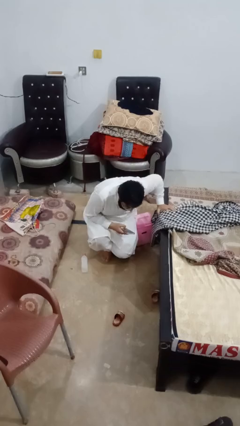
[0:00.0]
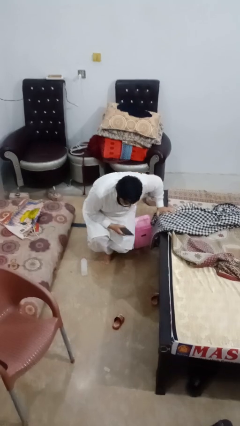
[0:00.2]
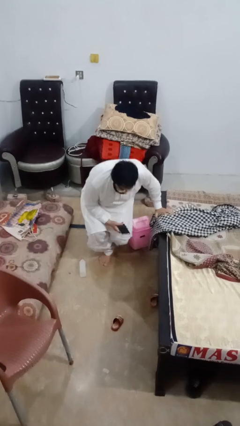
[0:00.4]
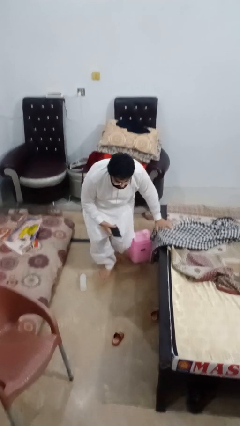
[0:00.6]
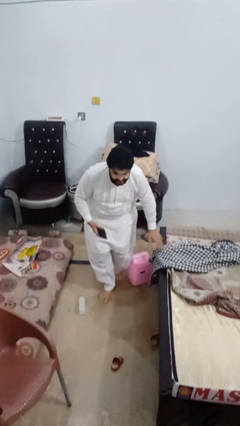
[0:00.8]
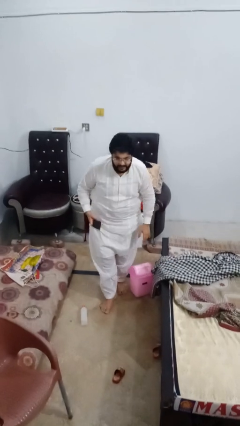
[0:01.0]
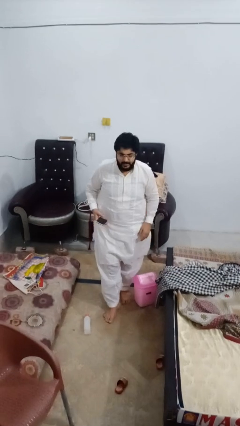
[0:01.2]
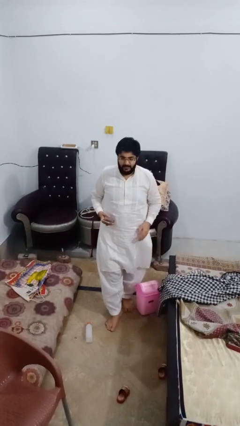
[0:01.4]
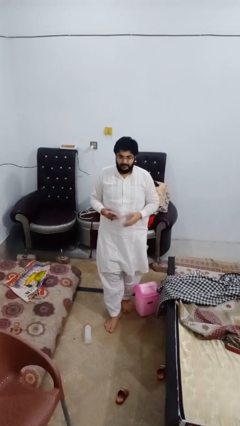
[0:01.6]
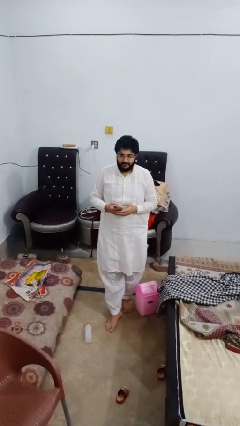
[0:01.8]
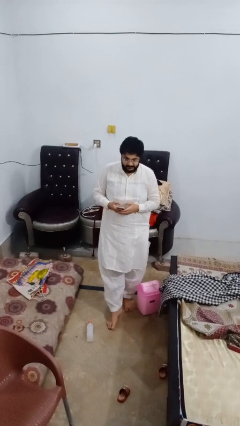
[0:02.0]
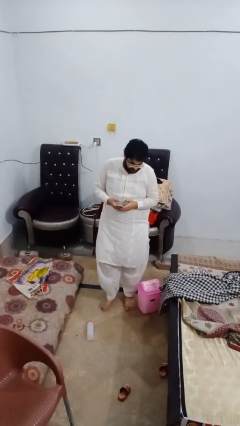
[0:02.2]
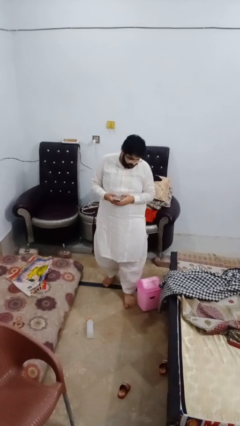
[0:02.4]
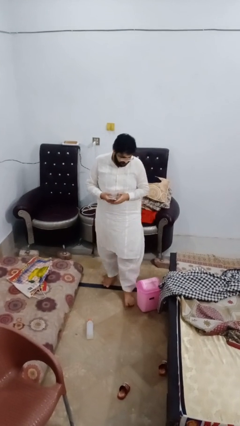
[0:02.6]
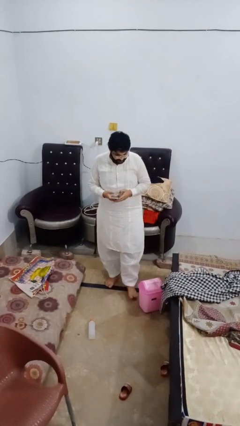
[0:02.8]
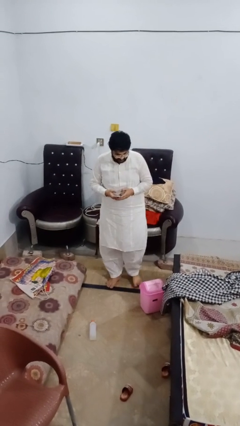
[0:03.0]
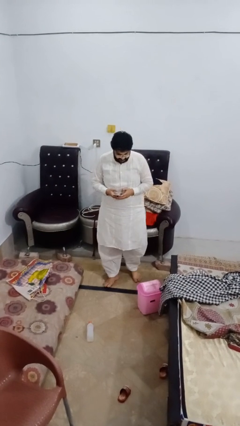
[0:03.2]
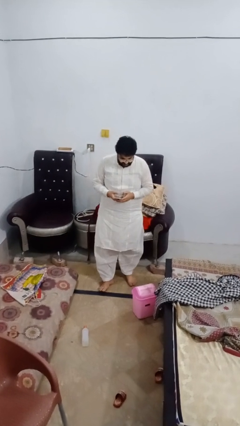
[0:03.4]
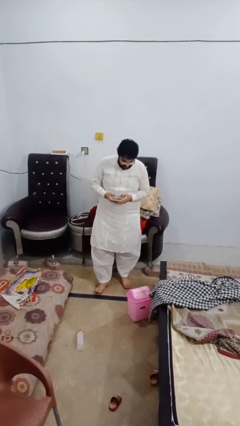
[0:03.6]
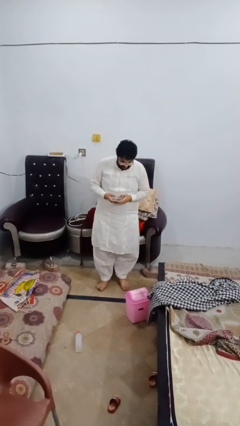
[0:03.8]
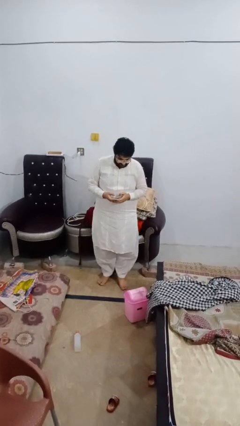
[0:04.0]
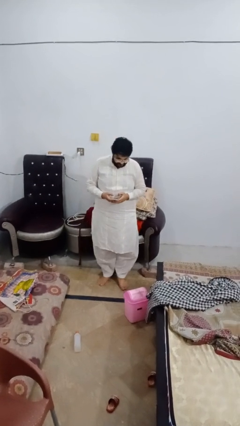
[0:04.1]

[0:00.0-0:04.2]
person stands up from floor

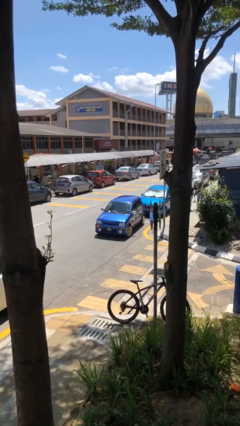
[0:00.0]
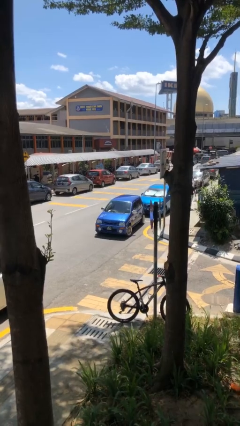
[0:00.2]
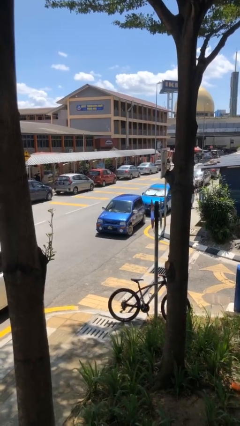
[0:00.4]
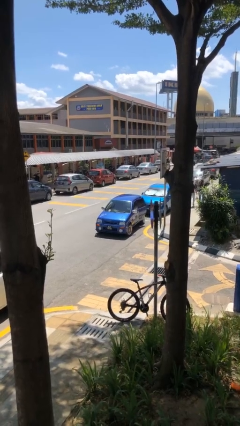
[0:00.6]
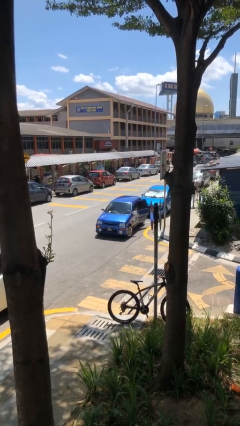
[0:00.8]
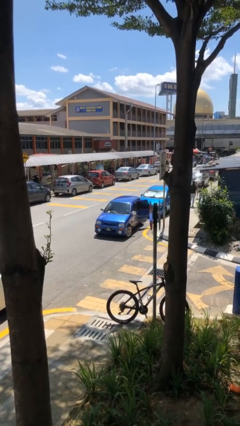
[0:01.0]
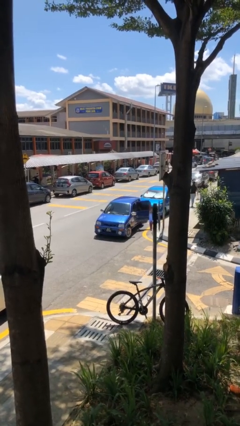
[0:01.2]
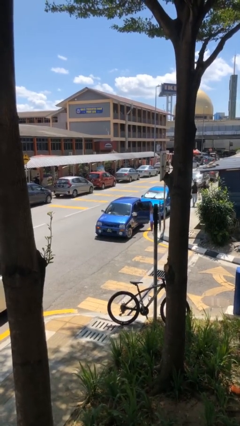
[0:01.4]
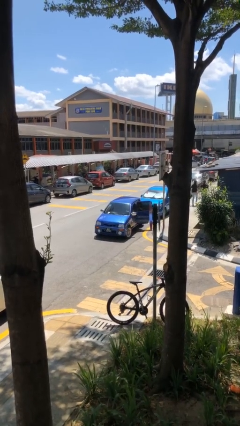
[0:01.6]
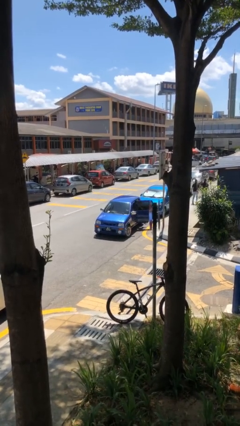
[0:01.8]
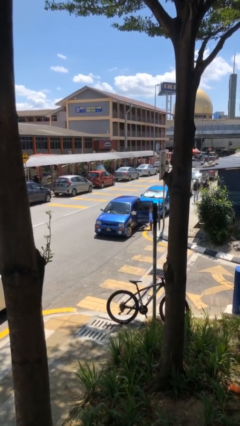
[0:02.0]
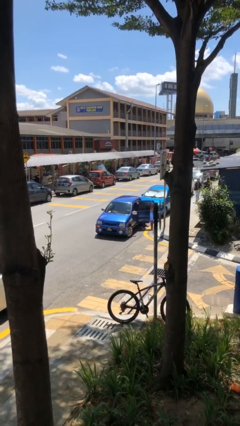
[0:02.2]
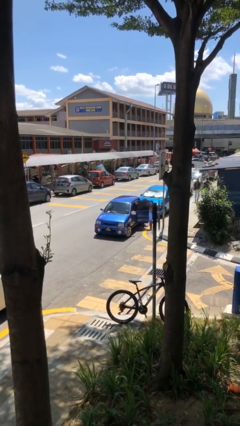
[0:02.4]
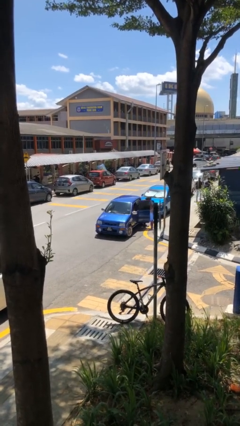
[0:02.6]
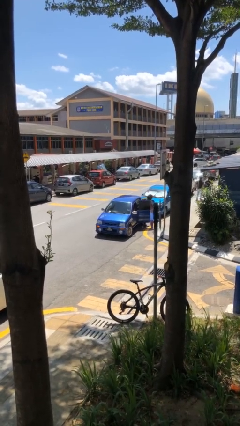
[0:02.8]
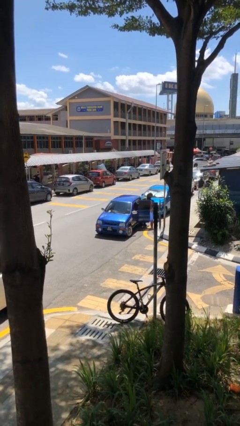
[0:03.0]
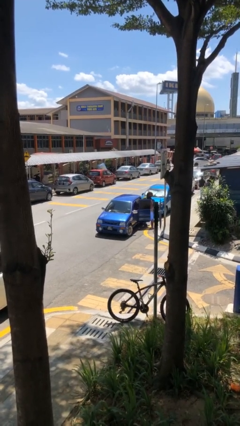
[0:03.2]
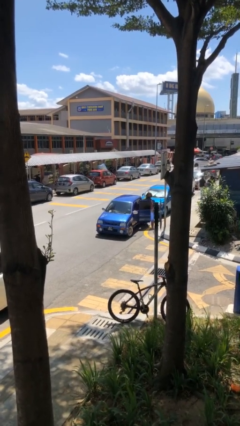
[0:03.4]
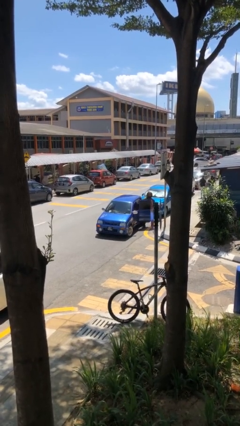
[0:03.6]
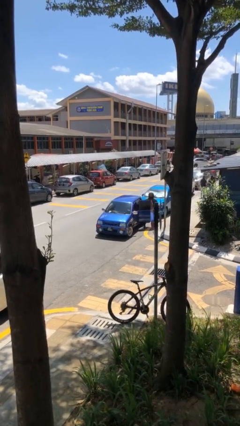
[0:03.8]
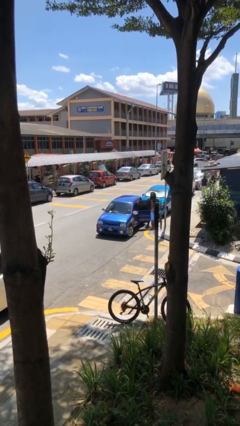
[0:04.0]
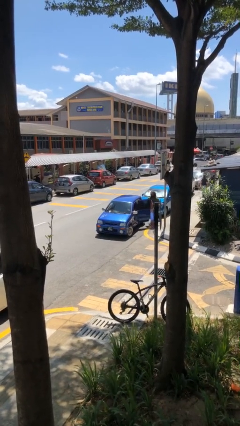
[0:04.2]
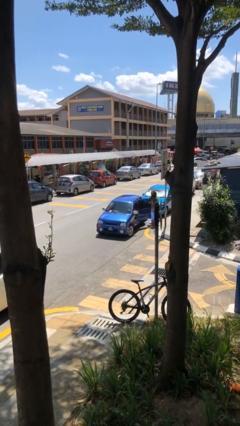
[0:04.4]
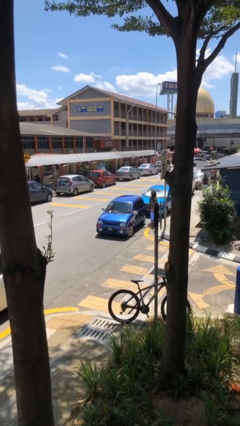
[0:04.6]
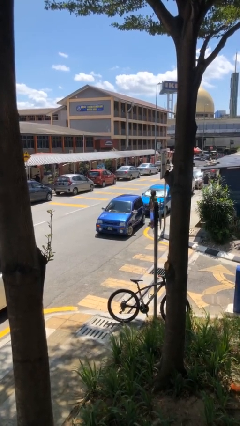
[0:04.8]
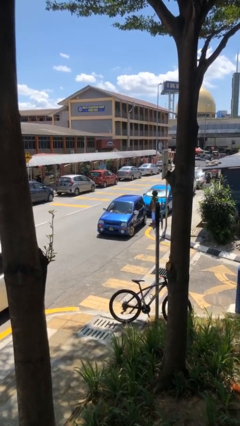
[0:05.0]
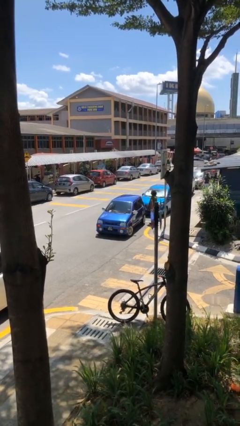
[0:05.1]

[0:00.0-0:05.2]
car drops off person

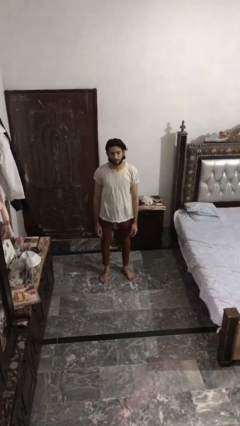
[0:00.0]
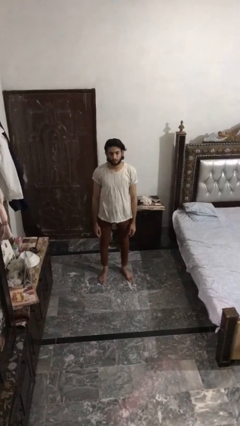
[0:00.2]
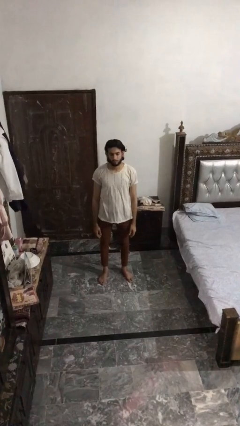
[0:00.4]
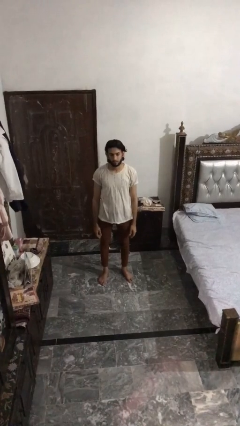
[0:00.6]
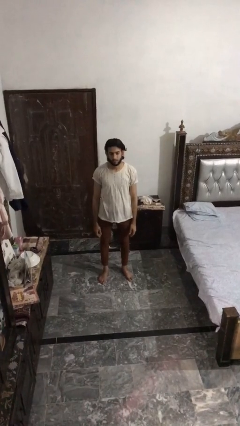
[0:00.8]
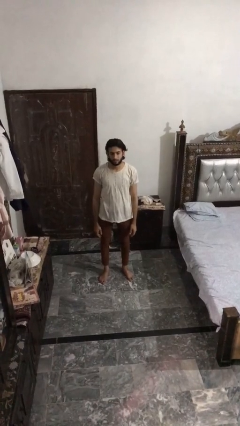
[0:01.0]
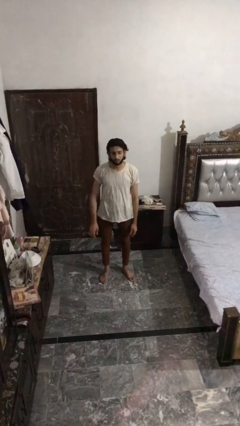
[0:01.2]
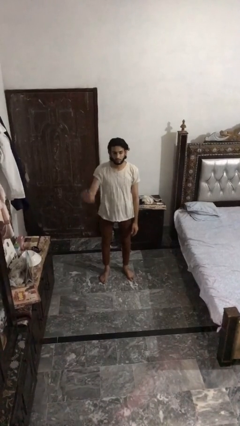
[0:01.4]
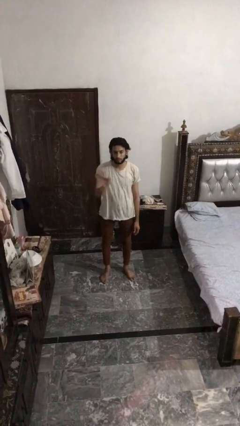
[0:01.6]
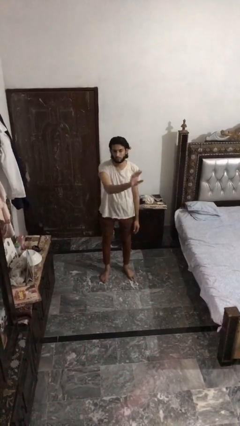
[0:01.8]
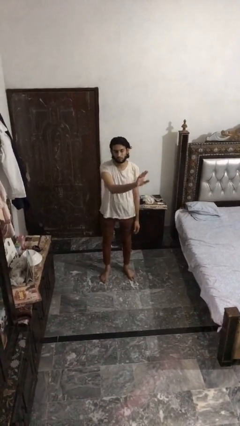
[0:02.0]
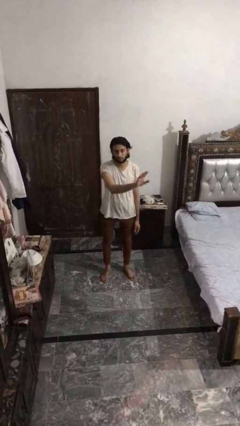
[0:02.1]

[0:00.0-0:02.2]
person gestures swipe left

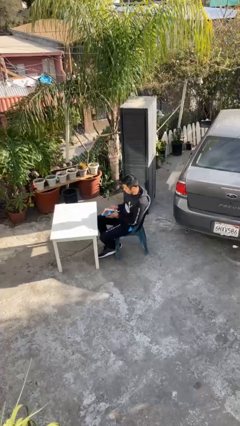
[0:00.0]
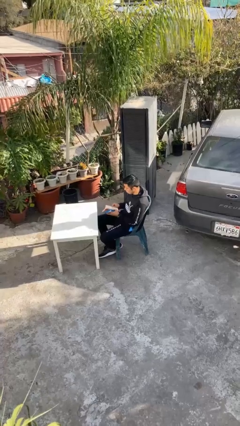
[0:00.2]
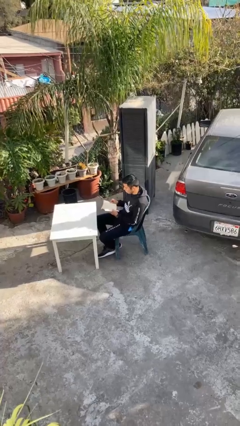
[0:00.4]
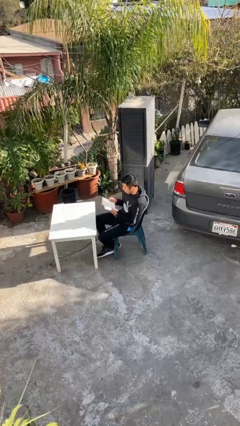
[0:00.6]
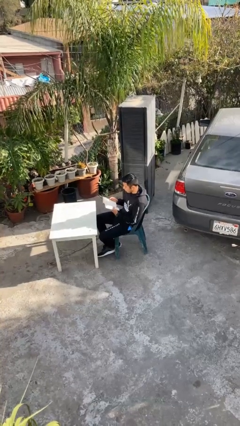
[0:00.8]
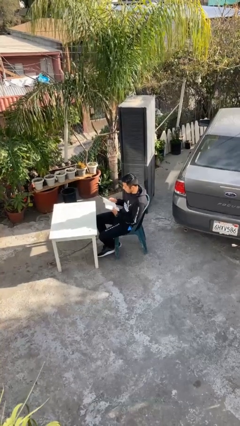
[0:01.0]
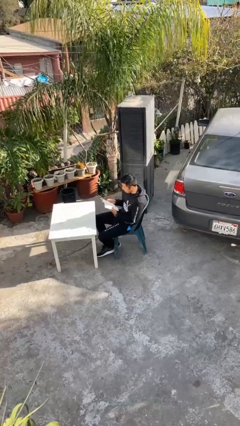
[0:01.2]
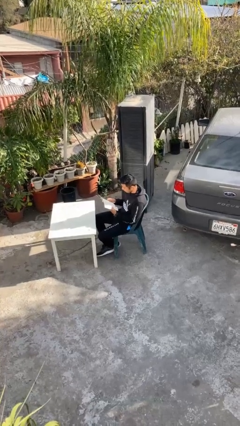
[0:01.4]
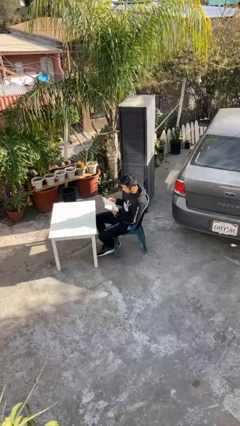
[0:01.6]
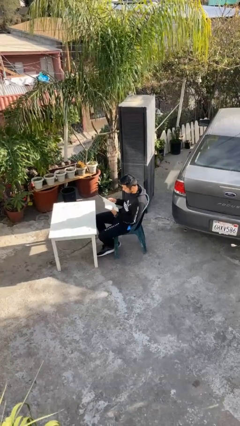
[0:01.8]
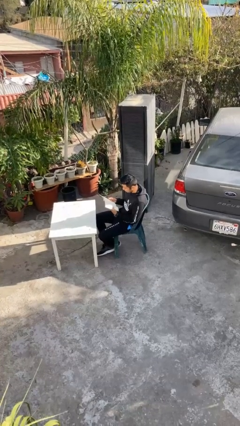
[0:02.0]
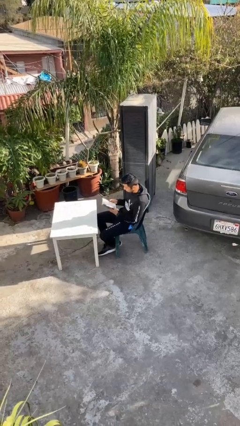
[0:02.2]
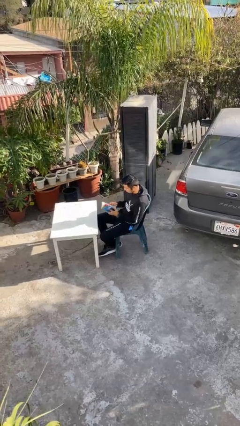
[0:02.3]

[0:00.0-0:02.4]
person reads document

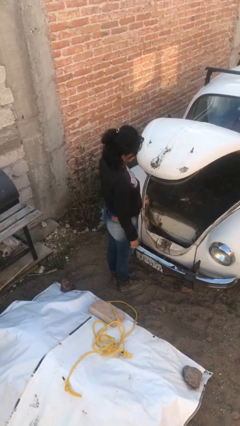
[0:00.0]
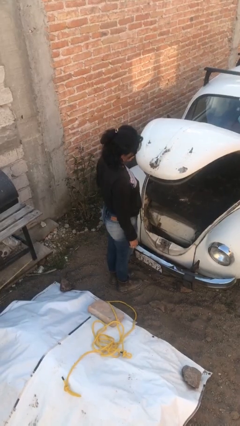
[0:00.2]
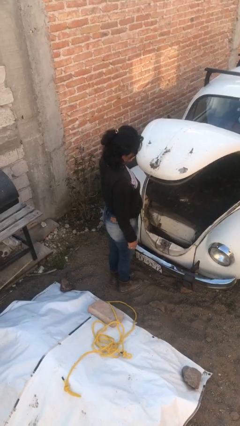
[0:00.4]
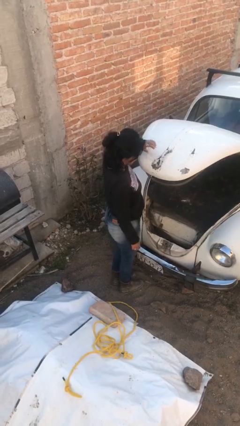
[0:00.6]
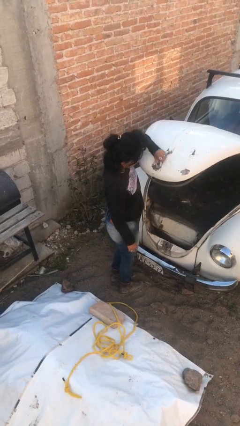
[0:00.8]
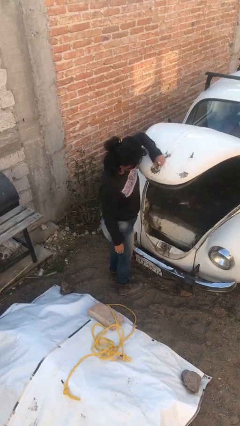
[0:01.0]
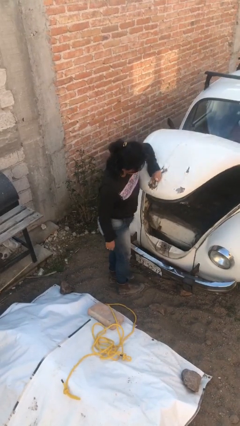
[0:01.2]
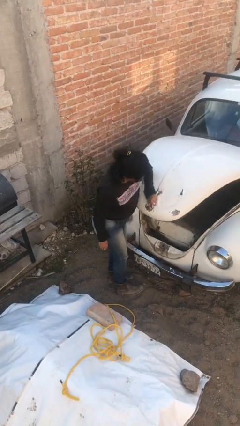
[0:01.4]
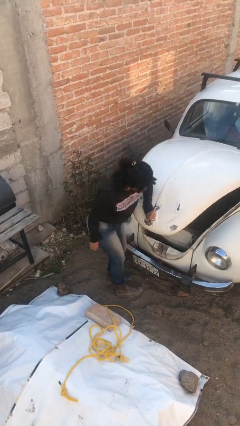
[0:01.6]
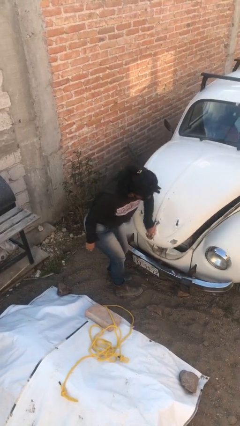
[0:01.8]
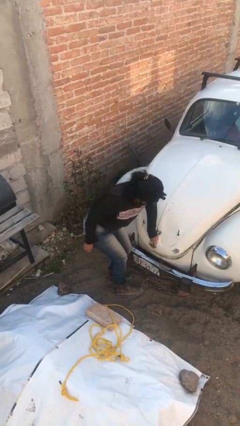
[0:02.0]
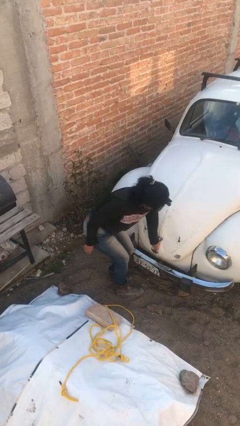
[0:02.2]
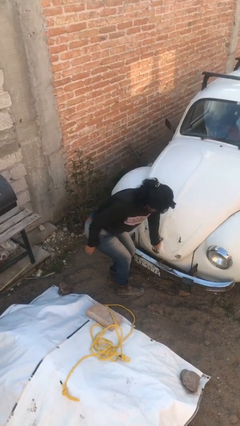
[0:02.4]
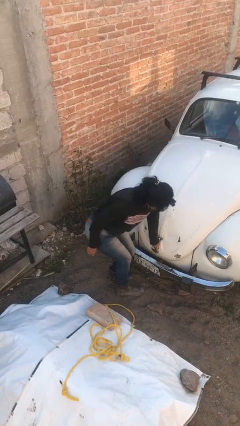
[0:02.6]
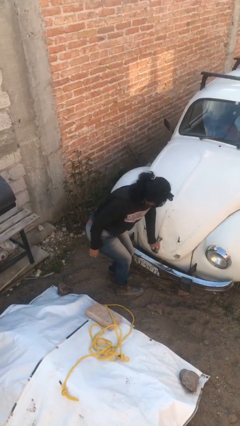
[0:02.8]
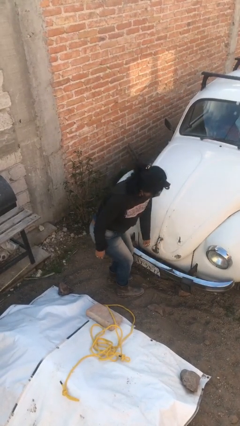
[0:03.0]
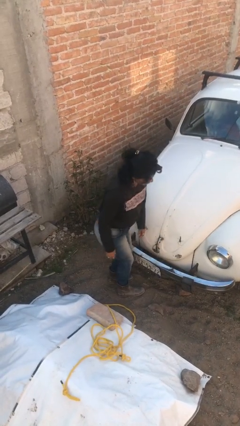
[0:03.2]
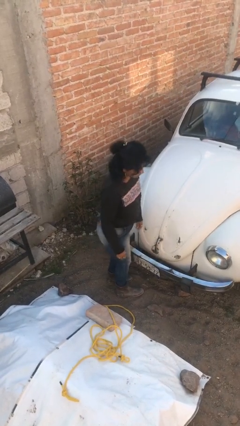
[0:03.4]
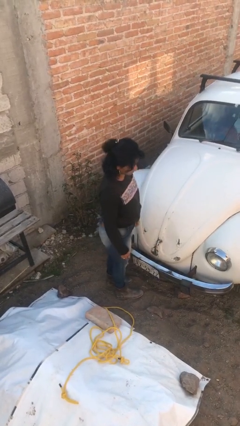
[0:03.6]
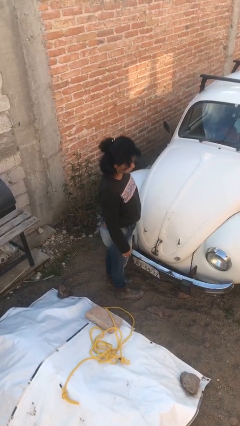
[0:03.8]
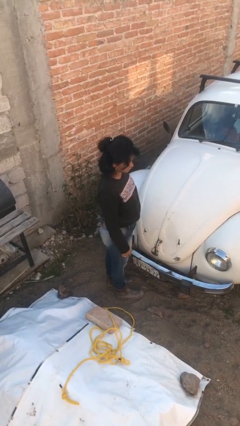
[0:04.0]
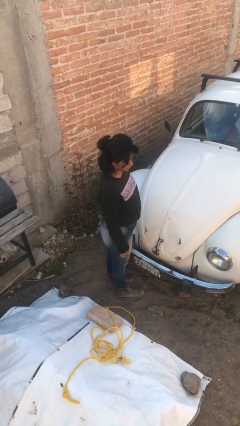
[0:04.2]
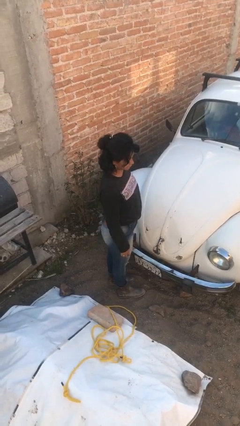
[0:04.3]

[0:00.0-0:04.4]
person closes car trunk
